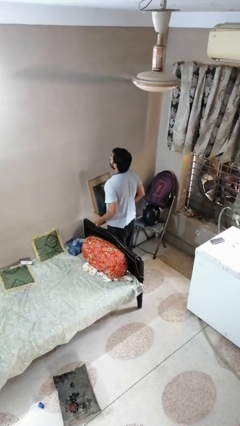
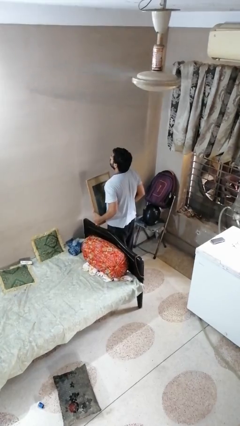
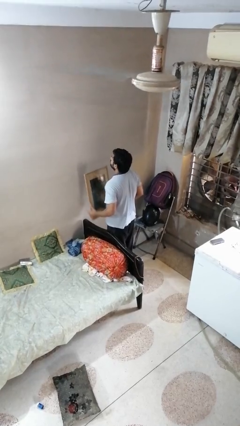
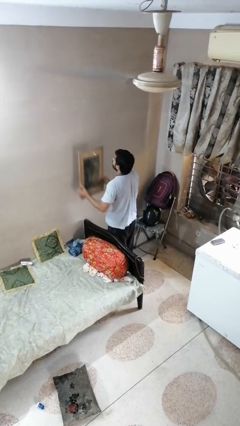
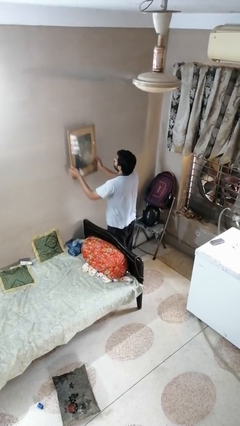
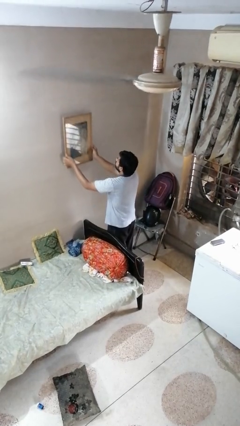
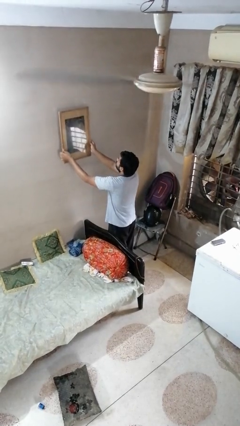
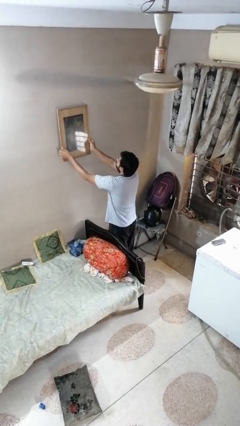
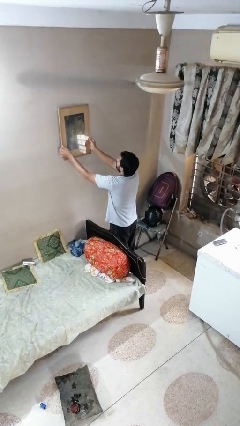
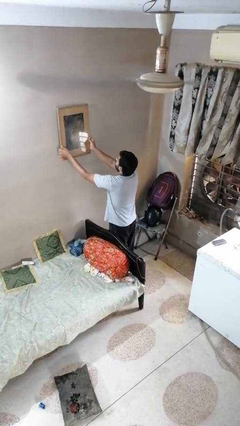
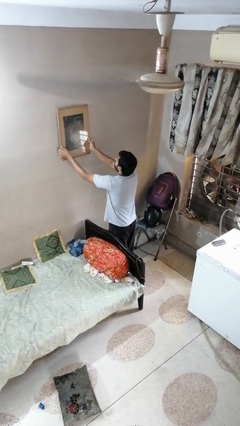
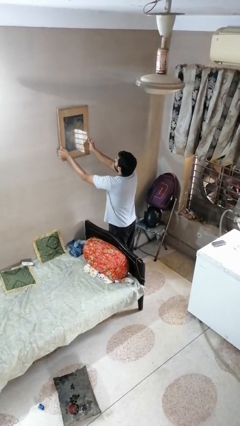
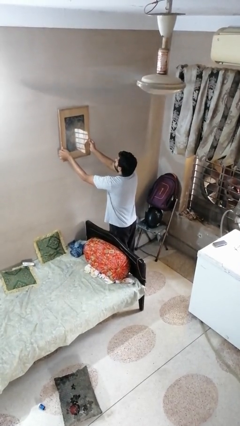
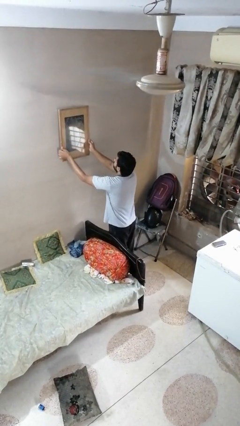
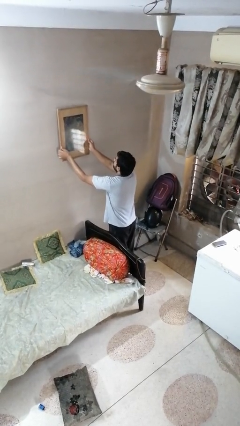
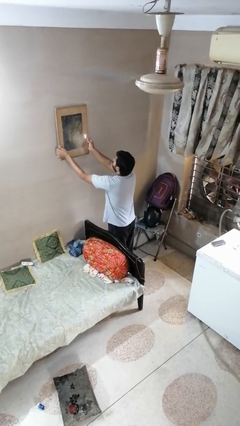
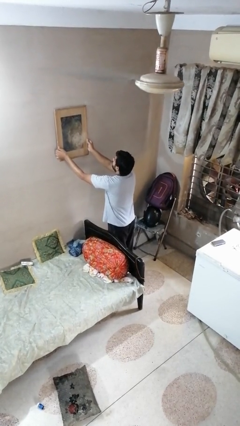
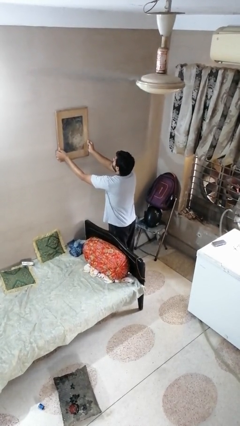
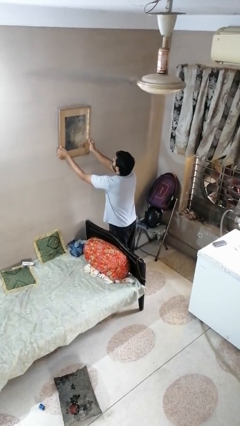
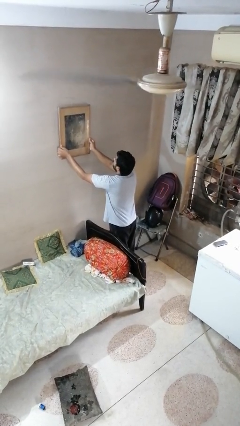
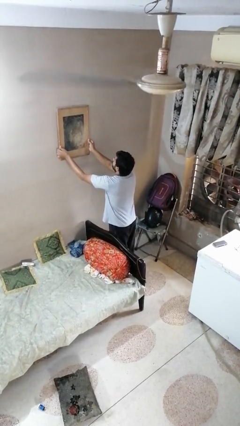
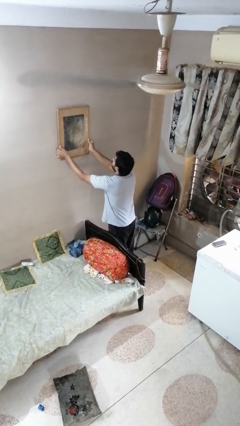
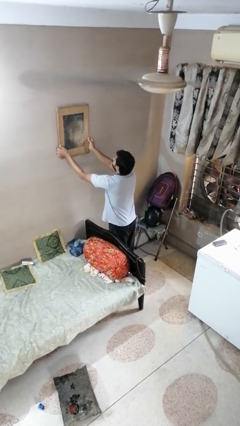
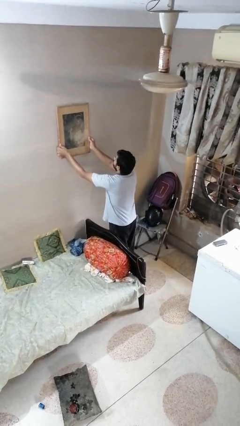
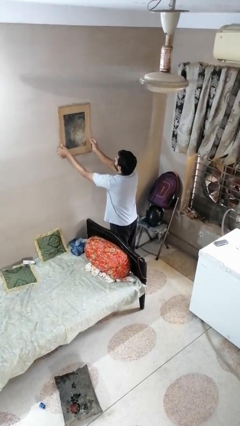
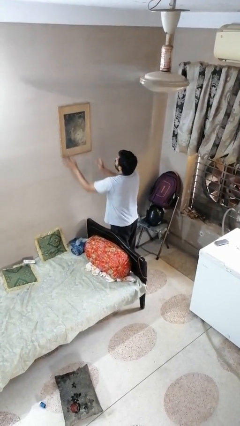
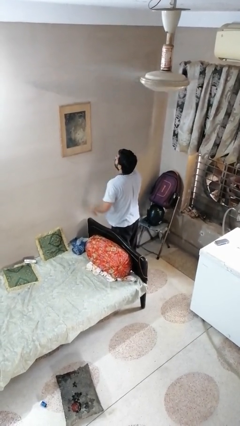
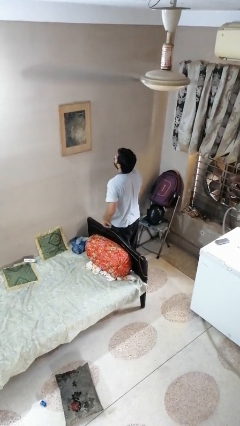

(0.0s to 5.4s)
person puts up picture frame

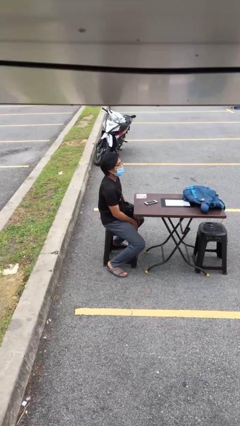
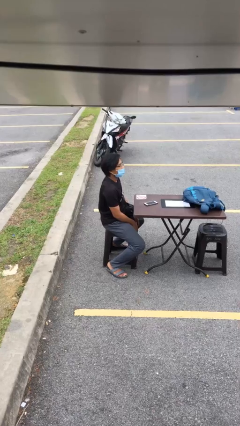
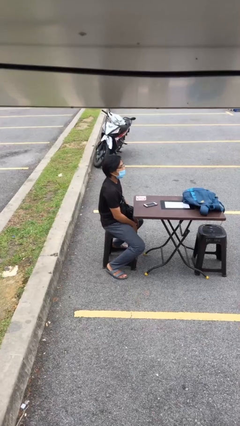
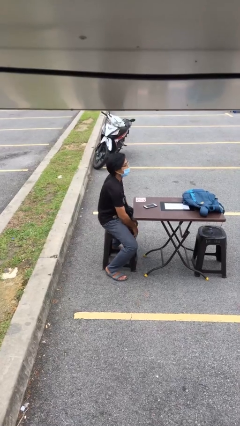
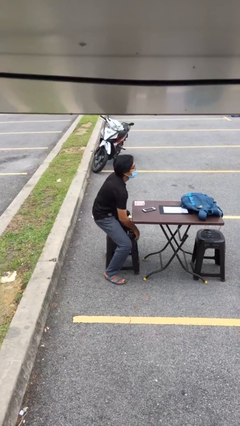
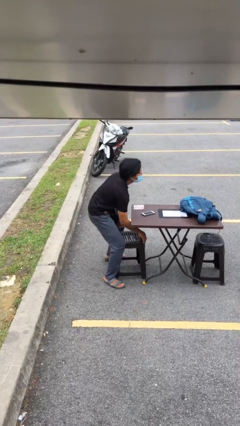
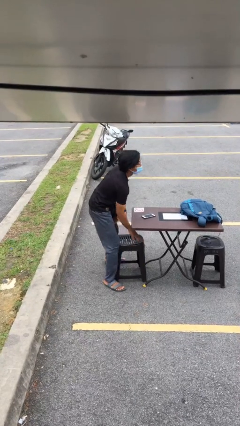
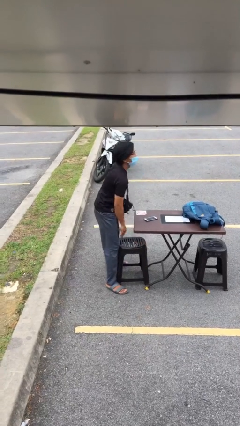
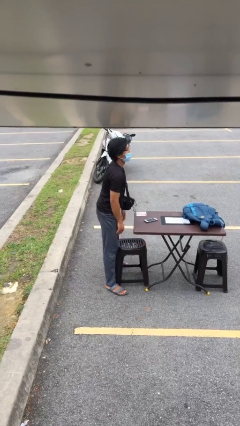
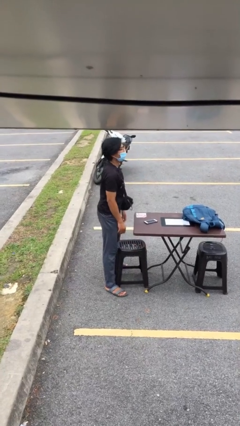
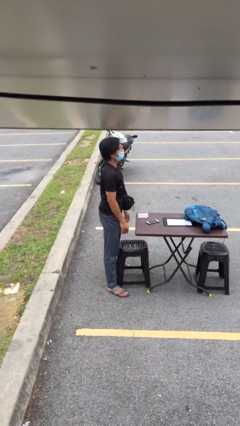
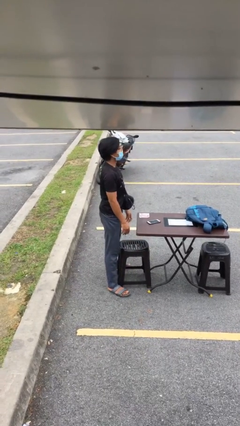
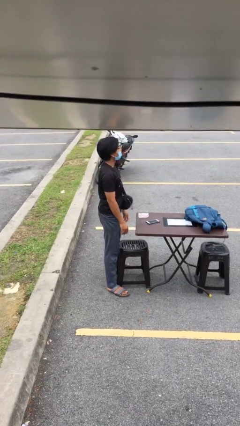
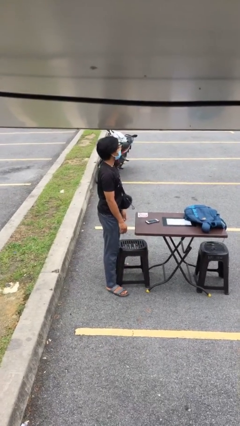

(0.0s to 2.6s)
person stands up

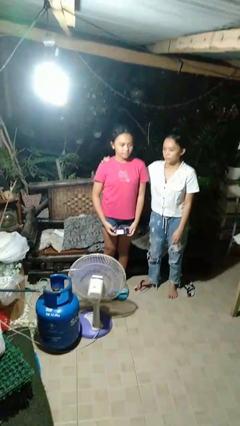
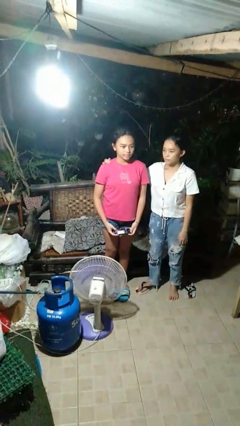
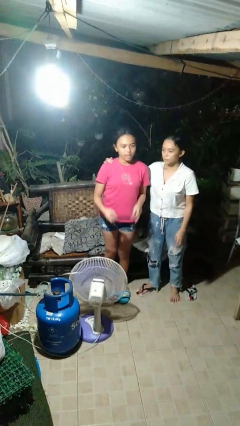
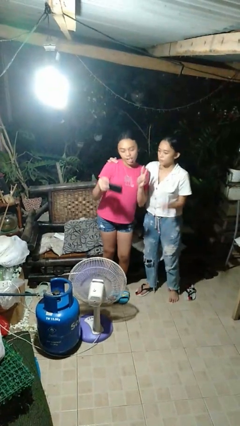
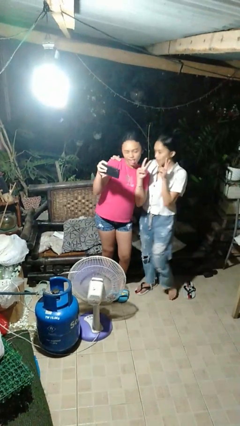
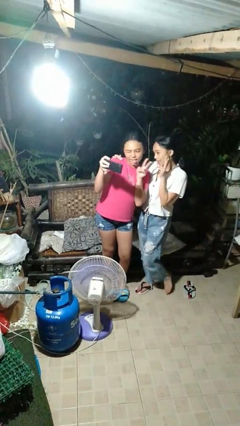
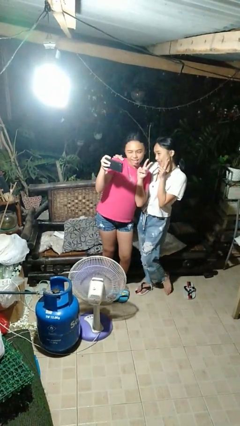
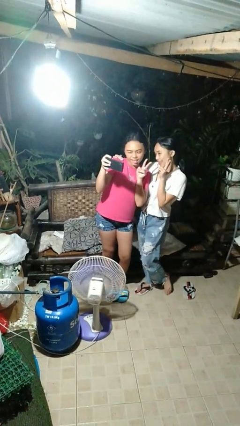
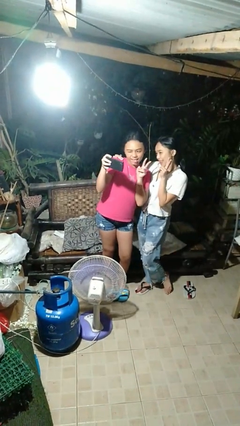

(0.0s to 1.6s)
person takes selfie with person

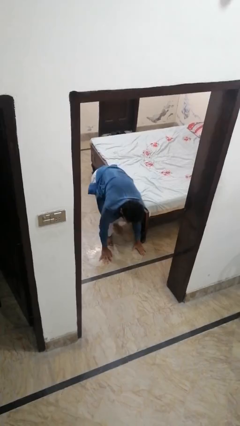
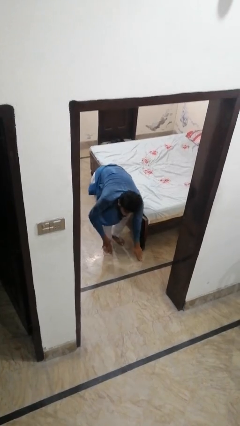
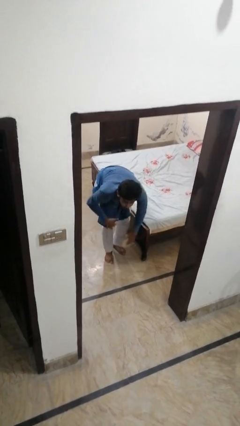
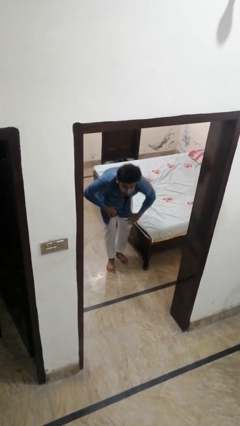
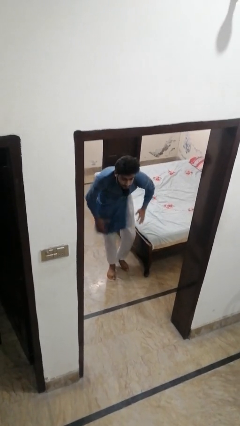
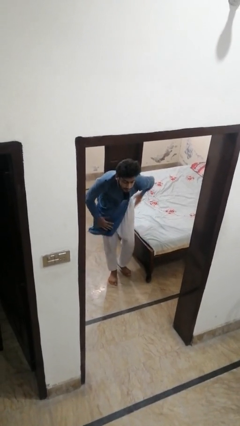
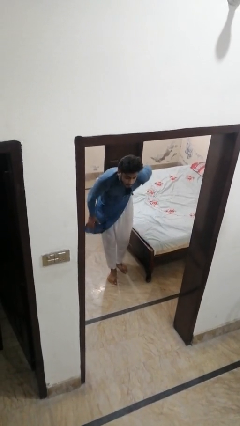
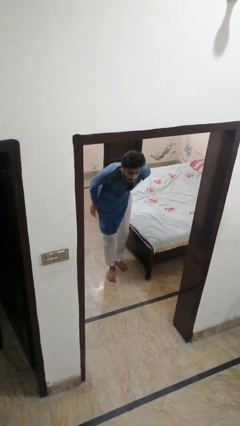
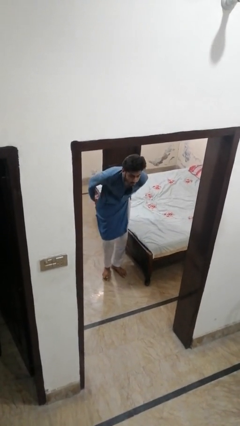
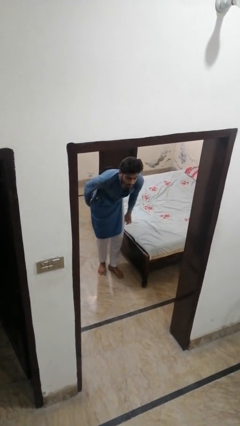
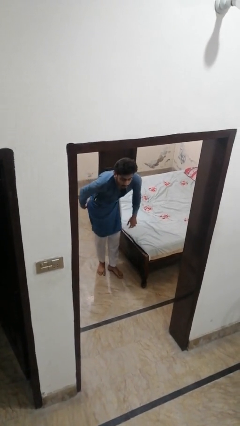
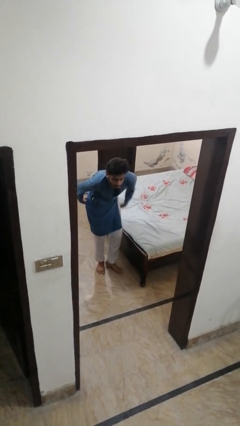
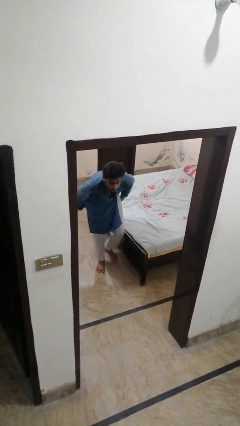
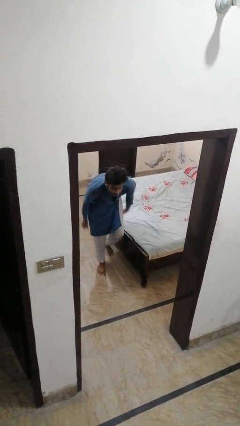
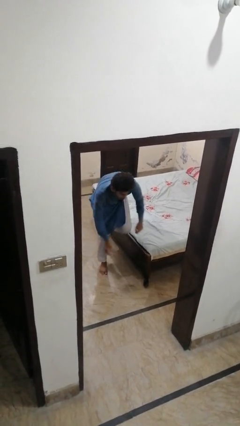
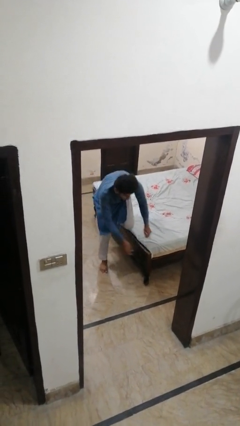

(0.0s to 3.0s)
person stands up from floor

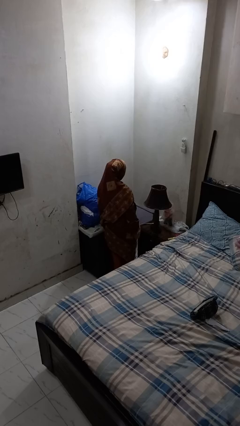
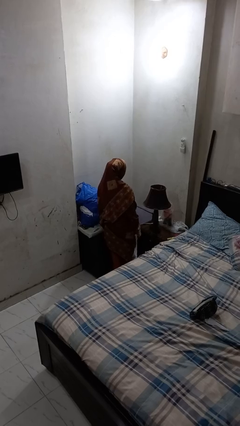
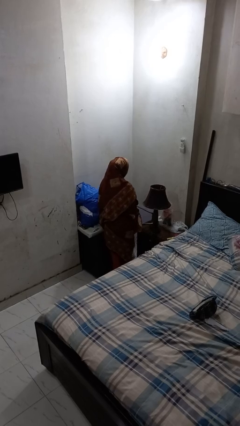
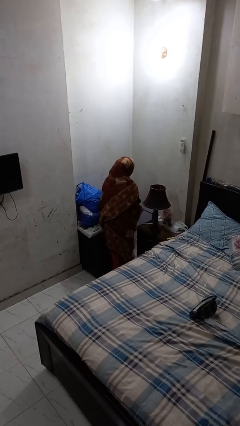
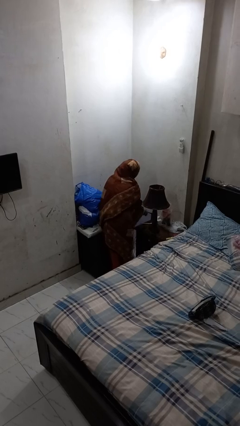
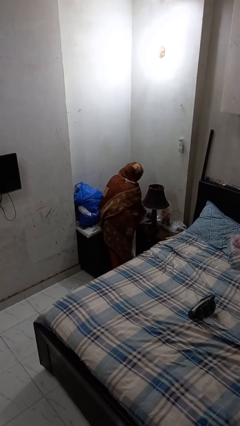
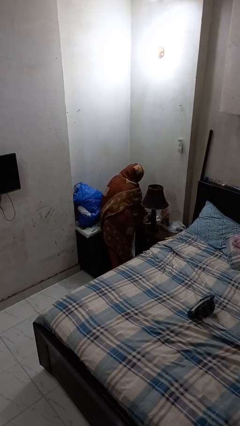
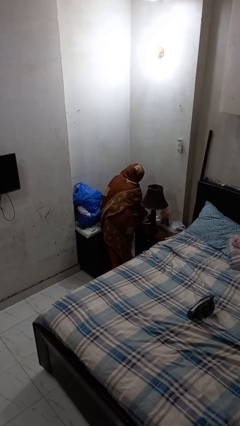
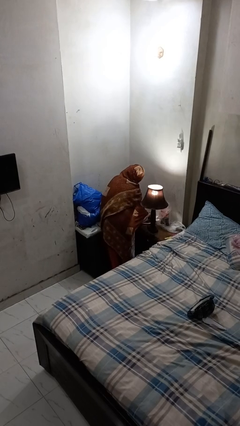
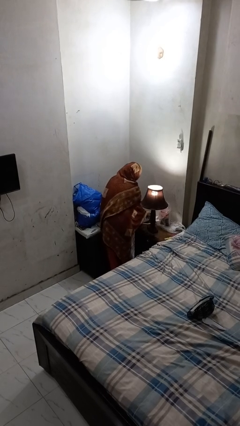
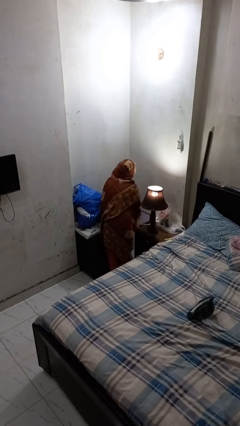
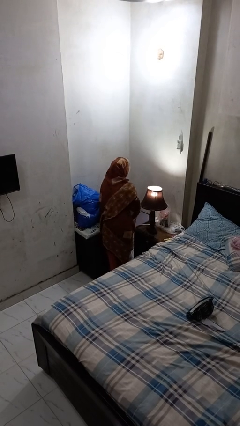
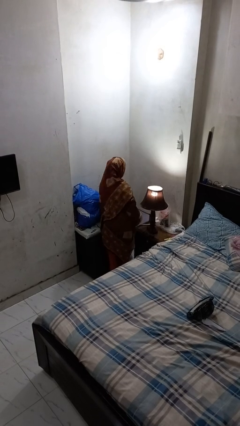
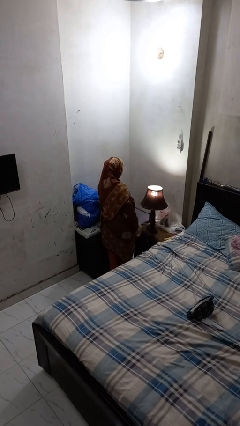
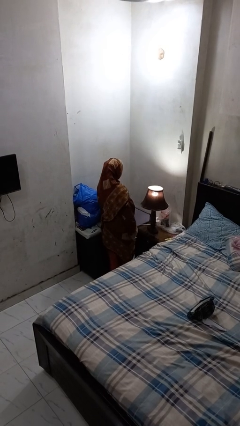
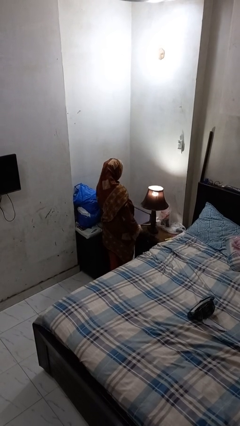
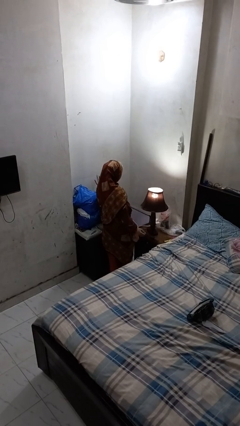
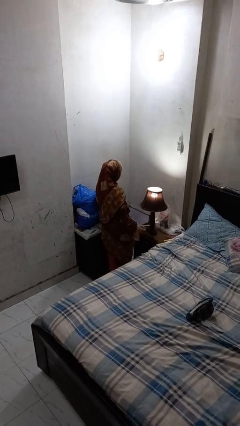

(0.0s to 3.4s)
person turns on lamp

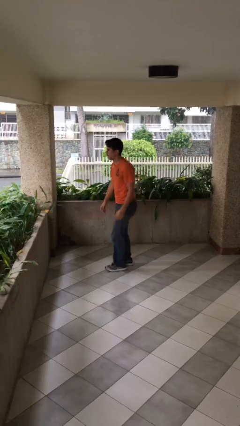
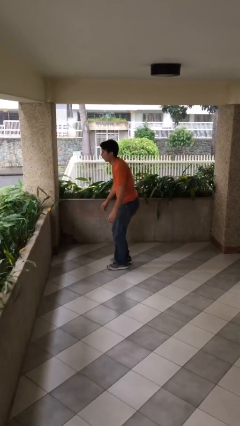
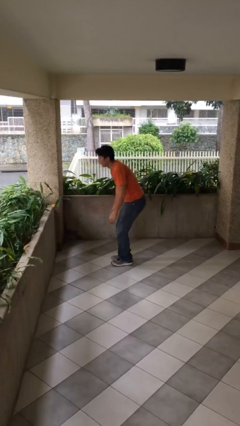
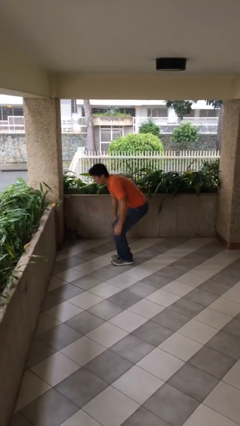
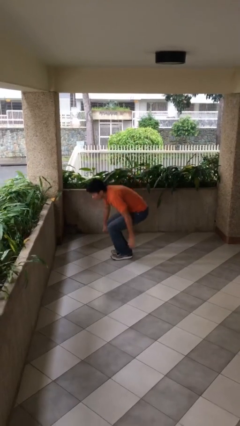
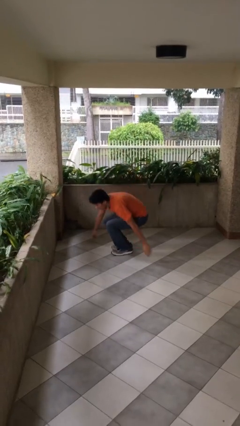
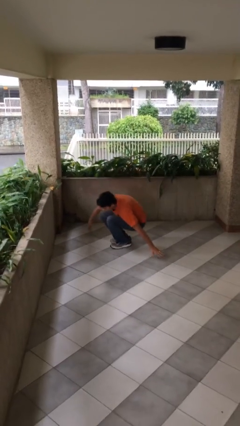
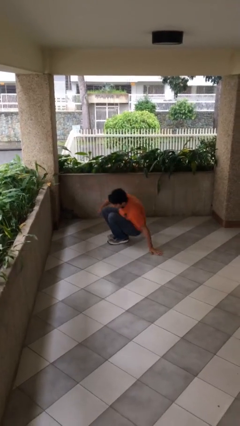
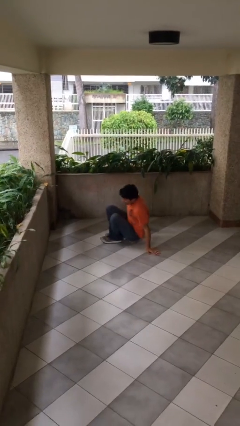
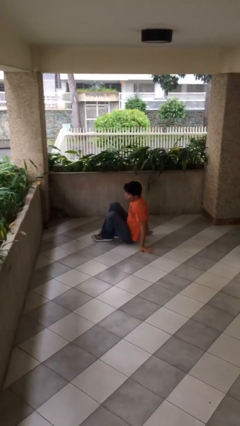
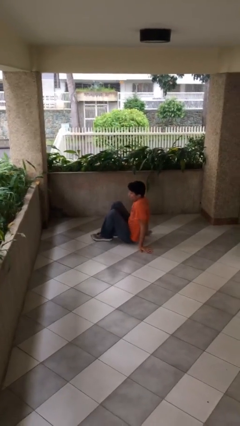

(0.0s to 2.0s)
person sits down
